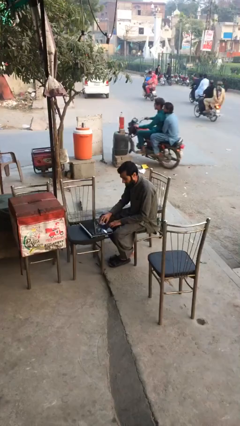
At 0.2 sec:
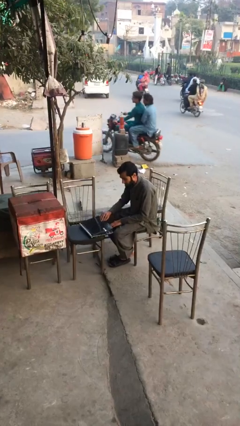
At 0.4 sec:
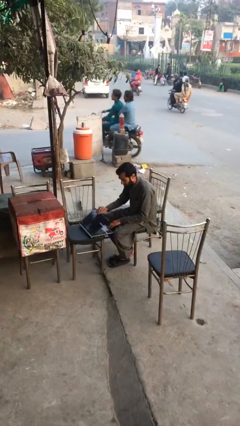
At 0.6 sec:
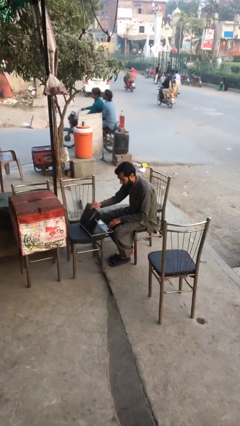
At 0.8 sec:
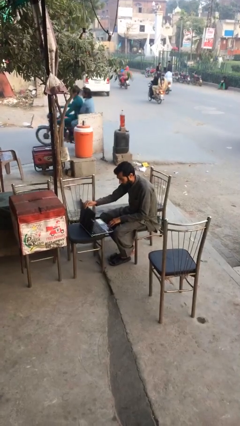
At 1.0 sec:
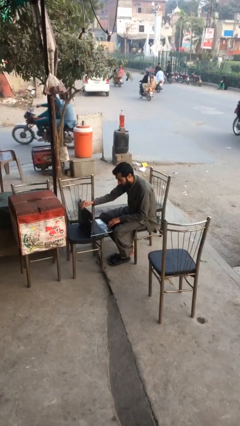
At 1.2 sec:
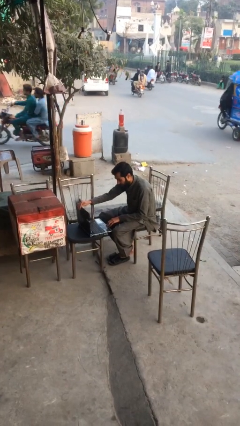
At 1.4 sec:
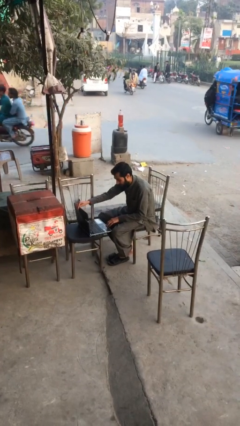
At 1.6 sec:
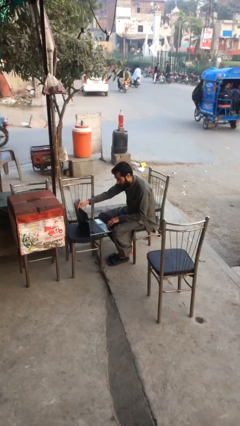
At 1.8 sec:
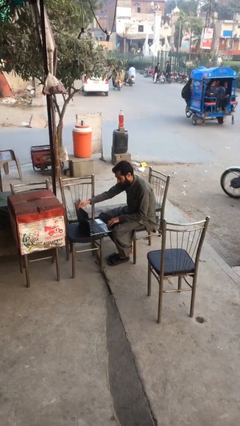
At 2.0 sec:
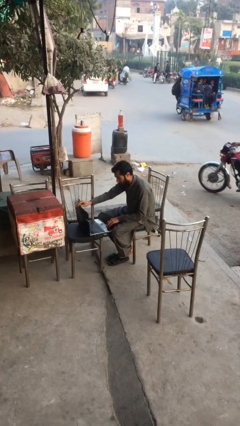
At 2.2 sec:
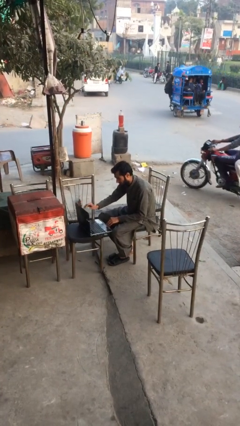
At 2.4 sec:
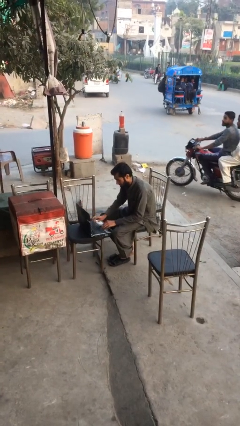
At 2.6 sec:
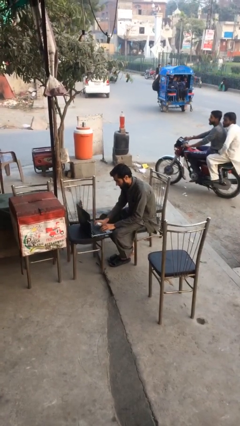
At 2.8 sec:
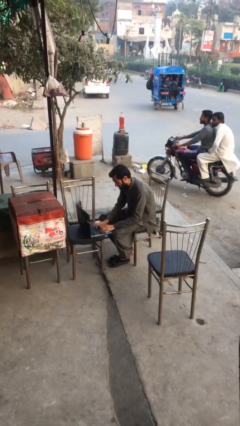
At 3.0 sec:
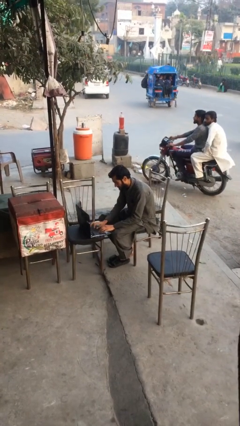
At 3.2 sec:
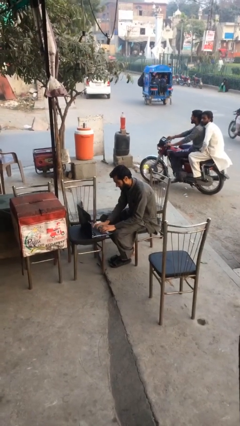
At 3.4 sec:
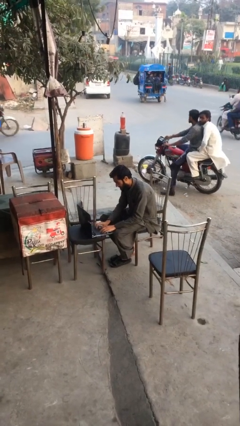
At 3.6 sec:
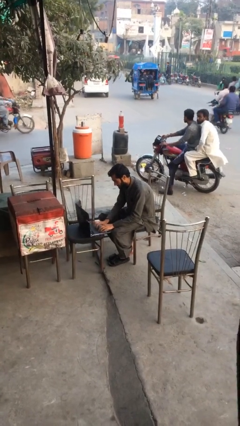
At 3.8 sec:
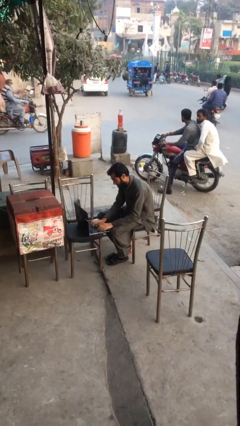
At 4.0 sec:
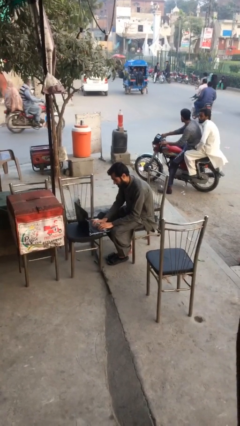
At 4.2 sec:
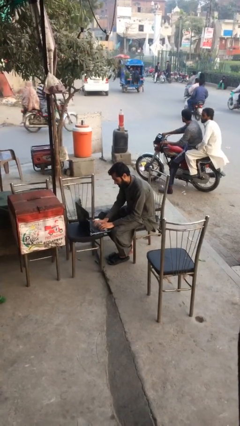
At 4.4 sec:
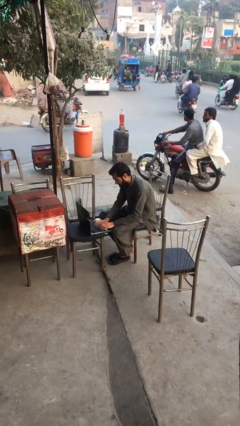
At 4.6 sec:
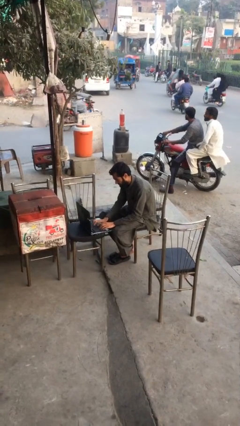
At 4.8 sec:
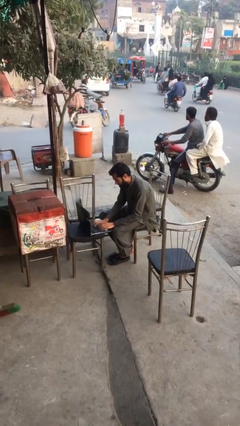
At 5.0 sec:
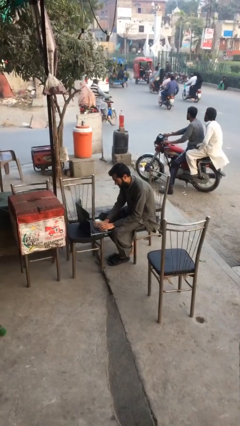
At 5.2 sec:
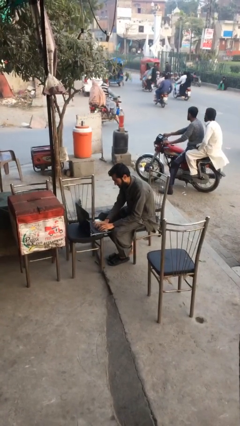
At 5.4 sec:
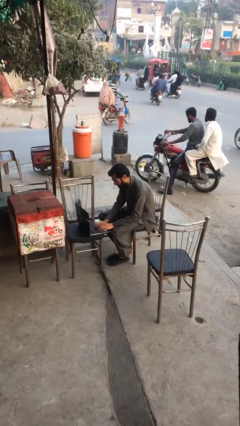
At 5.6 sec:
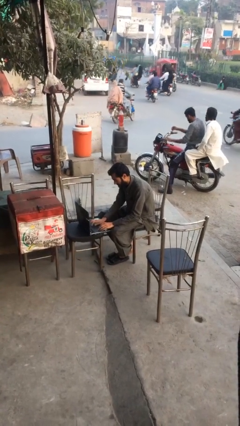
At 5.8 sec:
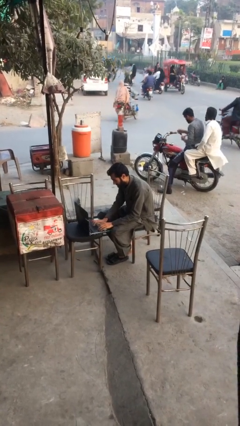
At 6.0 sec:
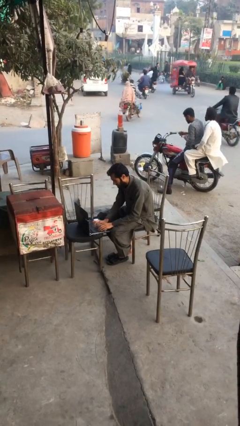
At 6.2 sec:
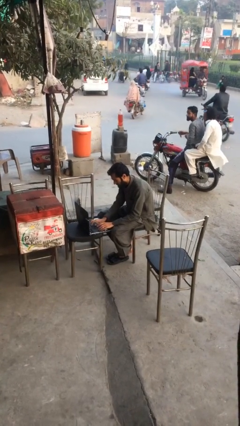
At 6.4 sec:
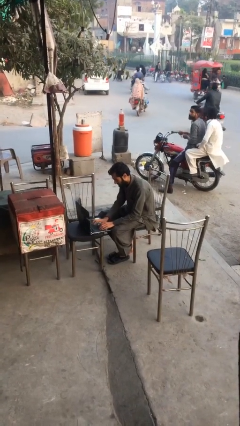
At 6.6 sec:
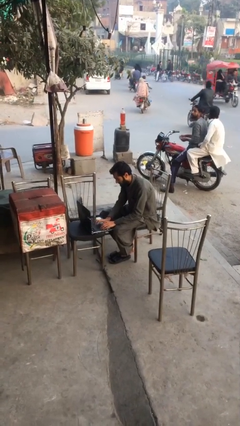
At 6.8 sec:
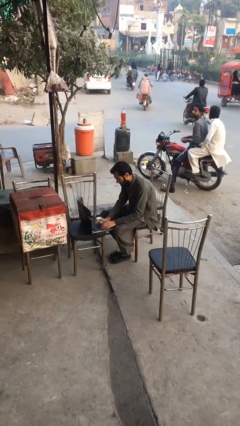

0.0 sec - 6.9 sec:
person interacts with laptop

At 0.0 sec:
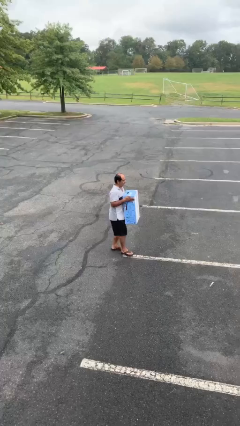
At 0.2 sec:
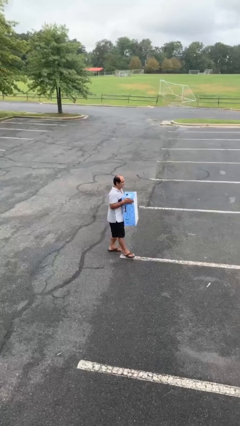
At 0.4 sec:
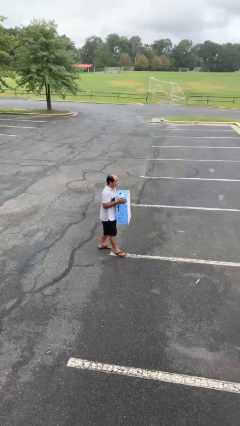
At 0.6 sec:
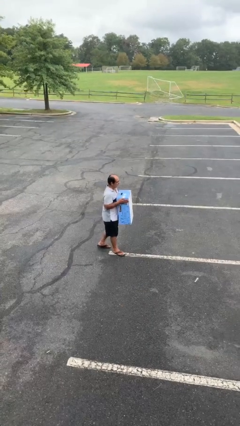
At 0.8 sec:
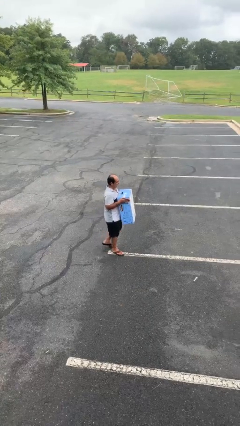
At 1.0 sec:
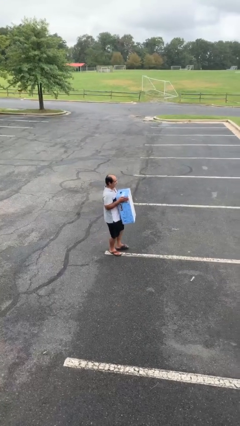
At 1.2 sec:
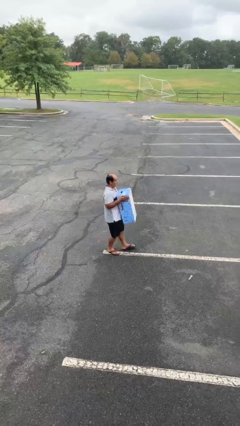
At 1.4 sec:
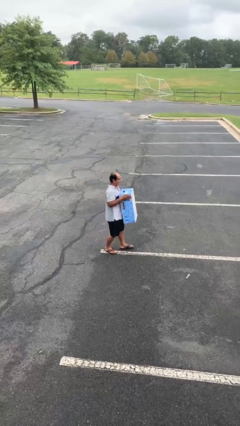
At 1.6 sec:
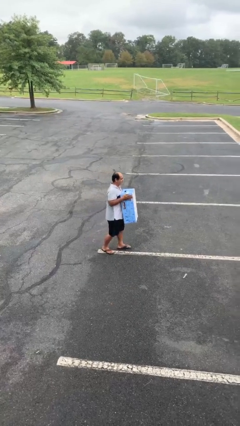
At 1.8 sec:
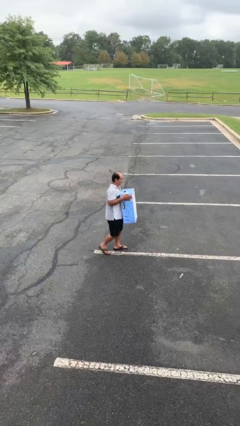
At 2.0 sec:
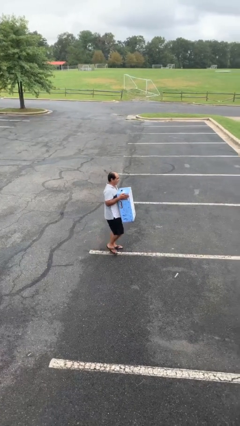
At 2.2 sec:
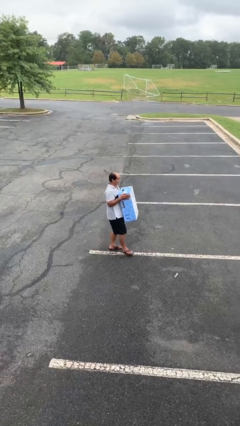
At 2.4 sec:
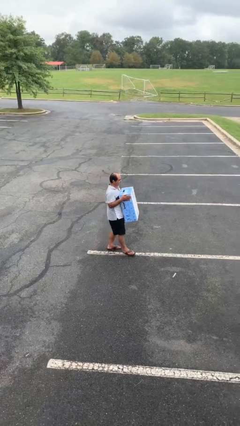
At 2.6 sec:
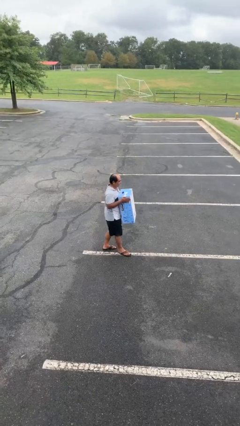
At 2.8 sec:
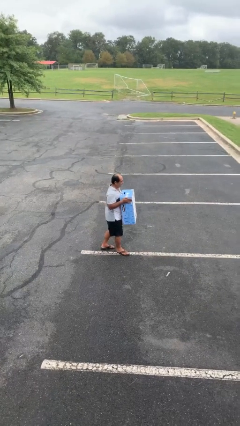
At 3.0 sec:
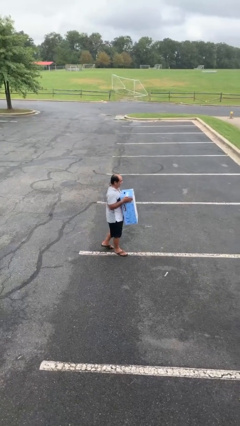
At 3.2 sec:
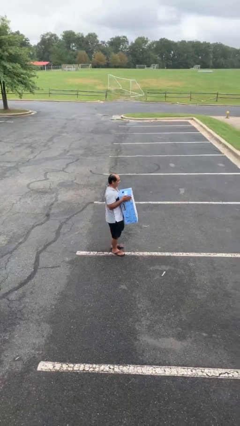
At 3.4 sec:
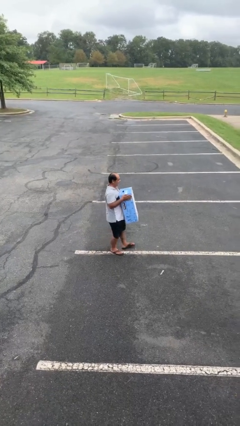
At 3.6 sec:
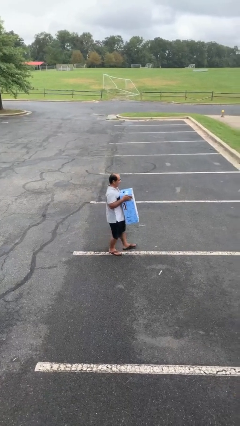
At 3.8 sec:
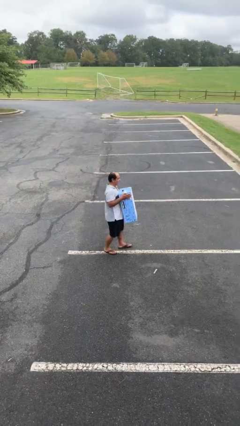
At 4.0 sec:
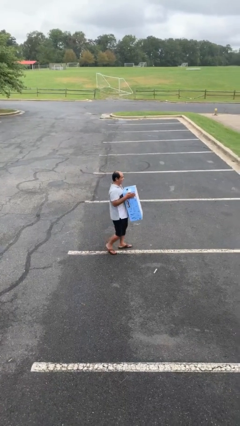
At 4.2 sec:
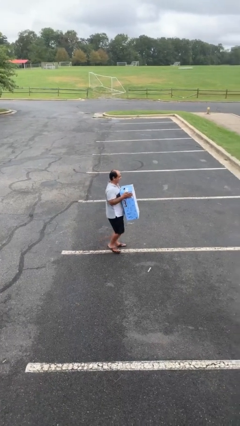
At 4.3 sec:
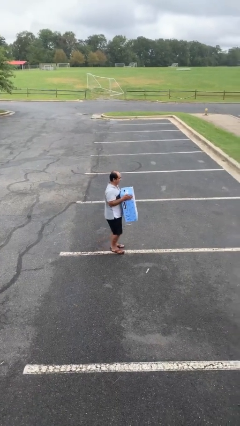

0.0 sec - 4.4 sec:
person carries heavy object

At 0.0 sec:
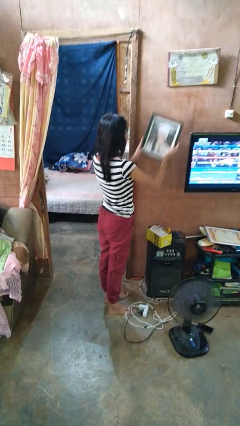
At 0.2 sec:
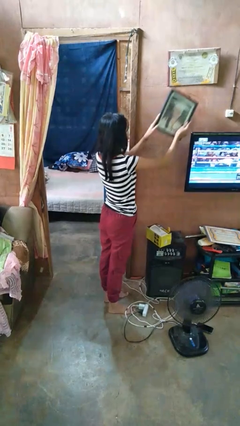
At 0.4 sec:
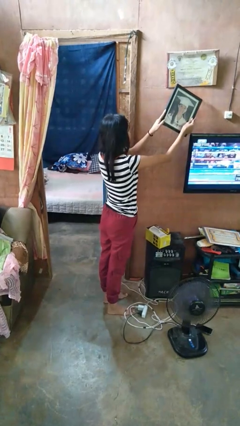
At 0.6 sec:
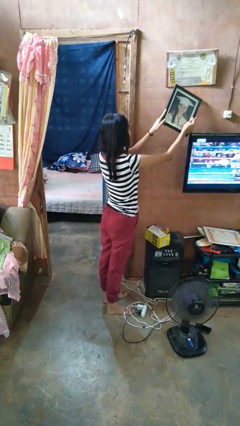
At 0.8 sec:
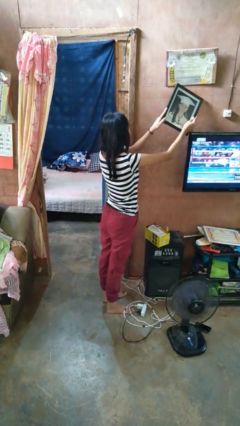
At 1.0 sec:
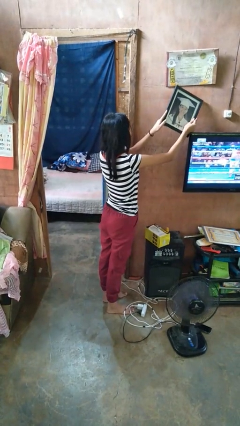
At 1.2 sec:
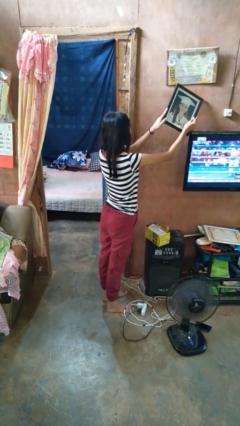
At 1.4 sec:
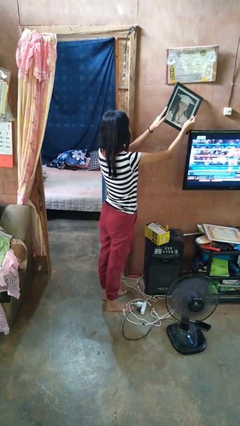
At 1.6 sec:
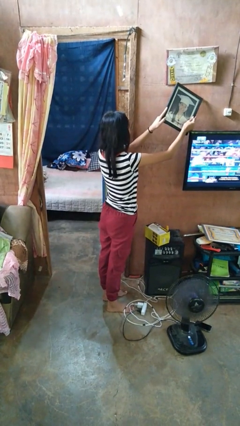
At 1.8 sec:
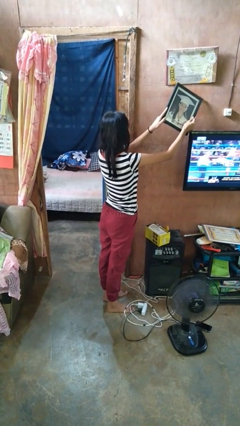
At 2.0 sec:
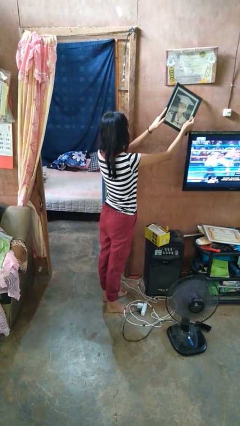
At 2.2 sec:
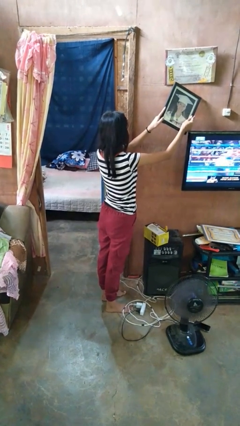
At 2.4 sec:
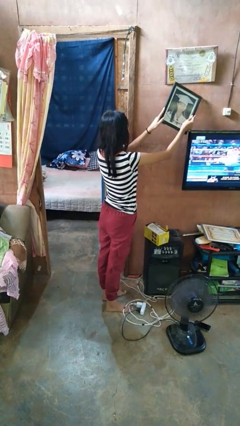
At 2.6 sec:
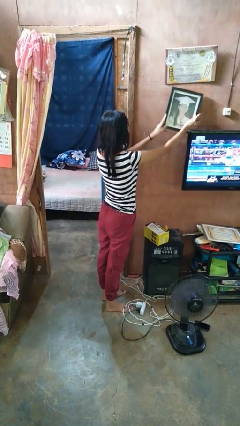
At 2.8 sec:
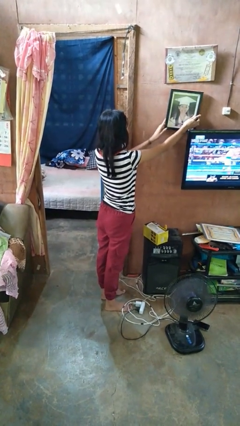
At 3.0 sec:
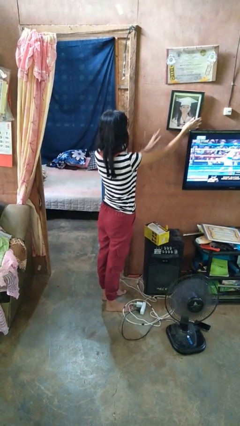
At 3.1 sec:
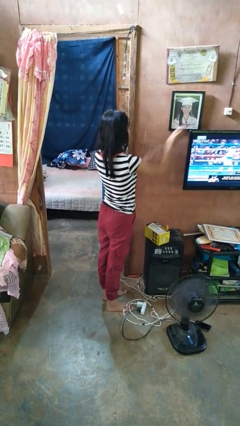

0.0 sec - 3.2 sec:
person puts up picture frame

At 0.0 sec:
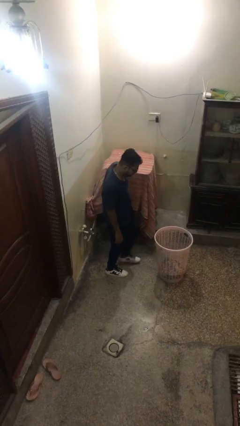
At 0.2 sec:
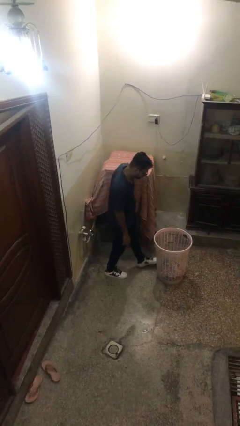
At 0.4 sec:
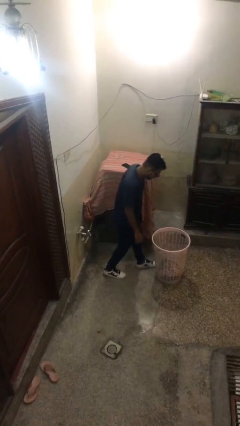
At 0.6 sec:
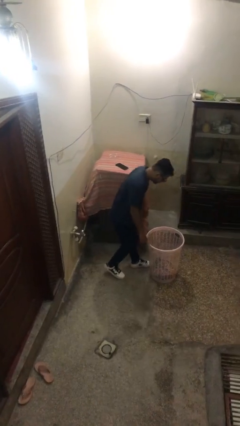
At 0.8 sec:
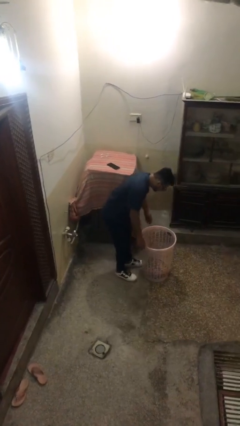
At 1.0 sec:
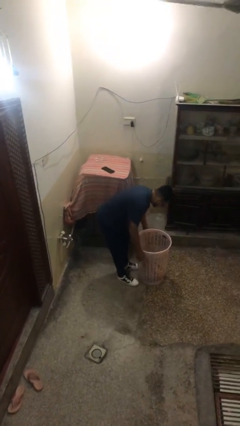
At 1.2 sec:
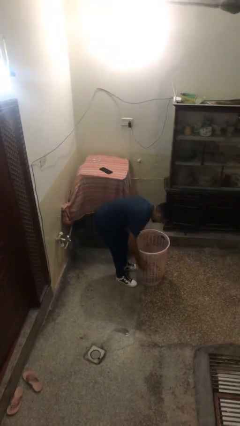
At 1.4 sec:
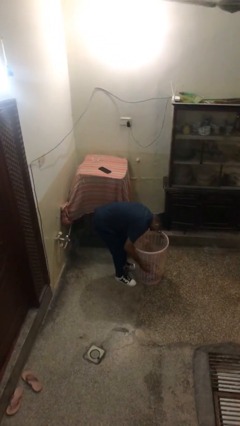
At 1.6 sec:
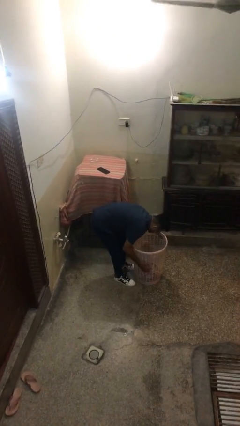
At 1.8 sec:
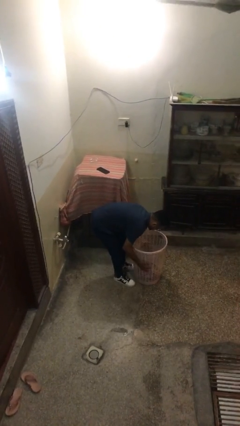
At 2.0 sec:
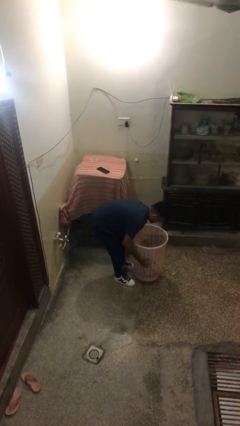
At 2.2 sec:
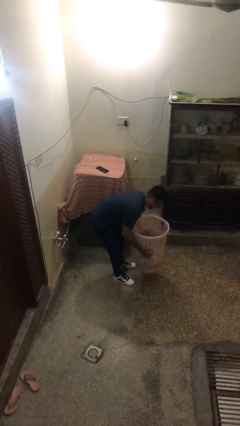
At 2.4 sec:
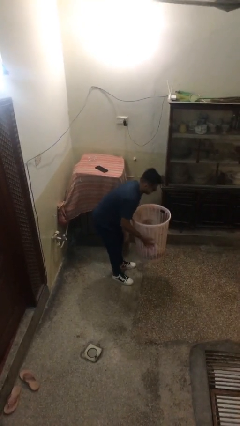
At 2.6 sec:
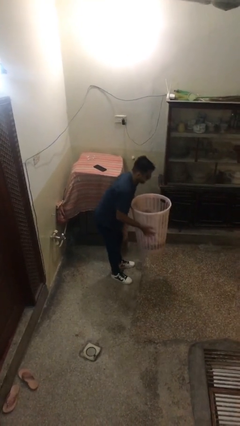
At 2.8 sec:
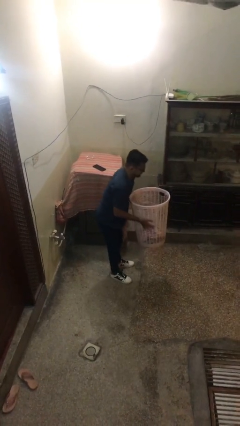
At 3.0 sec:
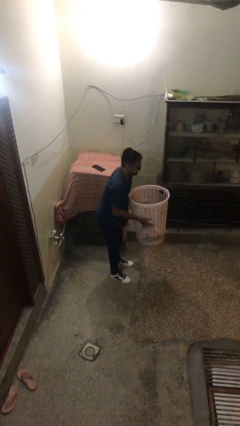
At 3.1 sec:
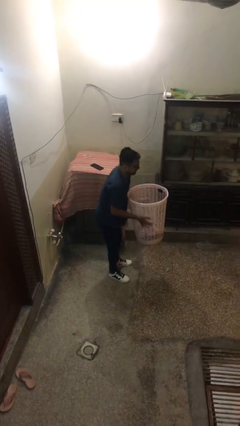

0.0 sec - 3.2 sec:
person picks up object from floor

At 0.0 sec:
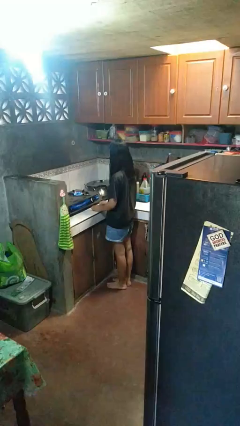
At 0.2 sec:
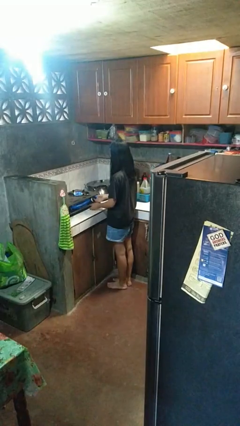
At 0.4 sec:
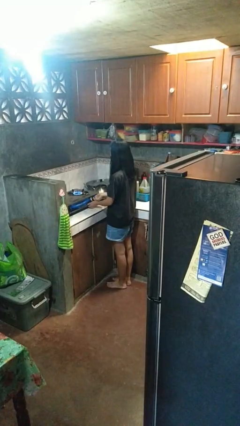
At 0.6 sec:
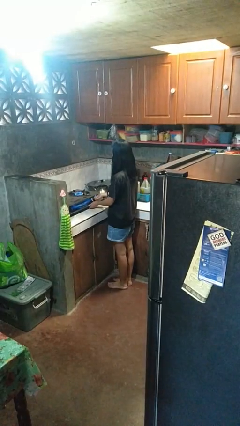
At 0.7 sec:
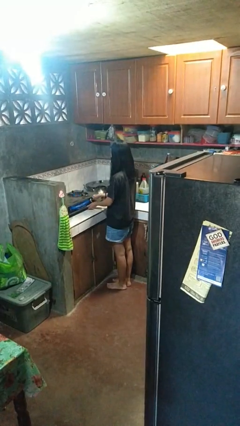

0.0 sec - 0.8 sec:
person turns off stovetop
